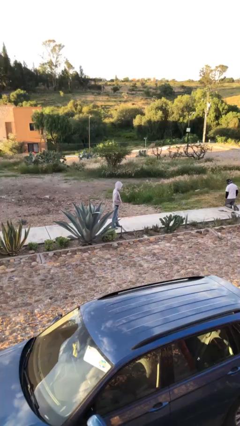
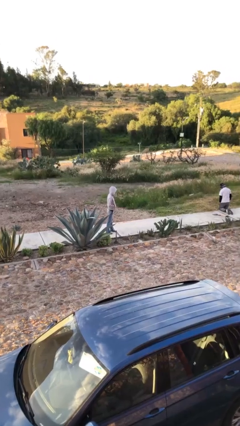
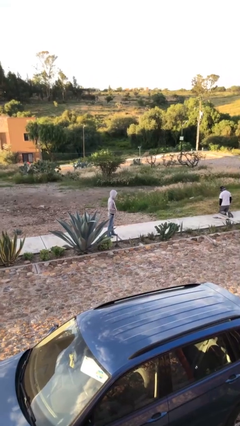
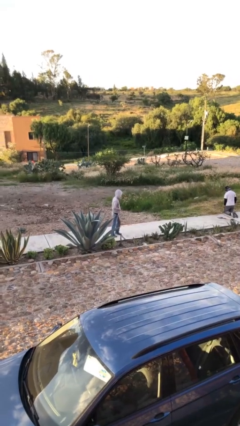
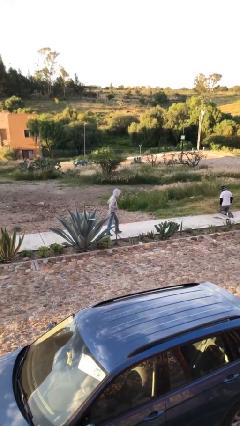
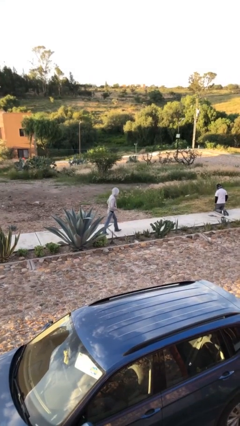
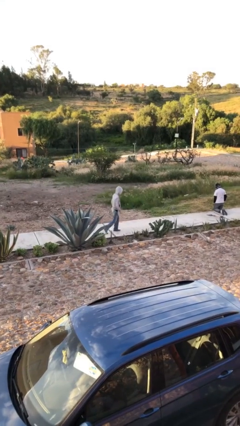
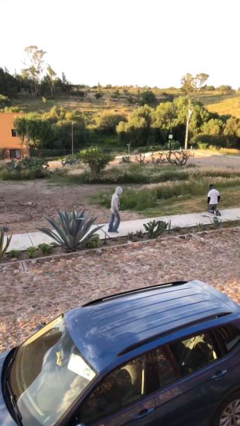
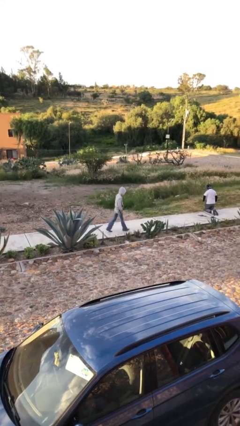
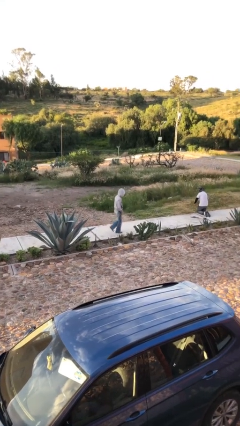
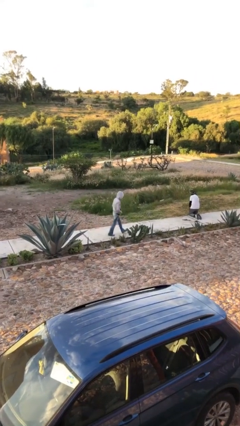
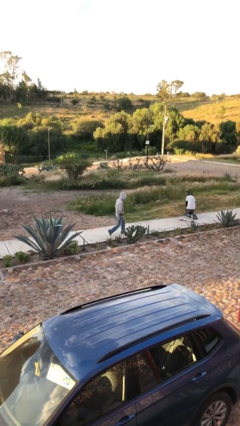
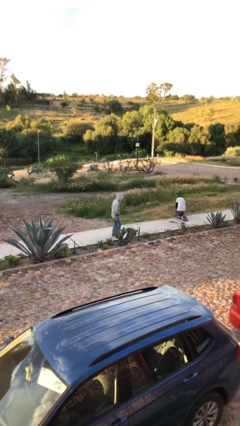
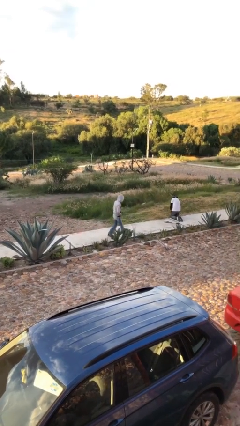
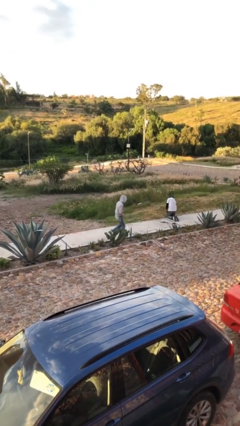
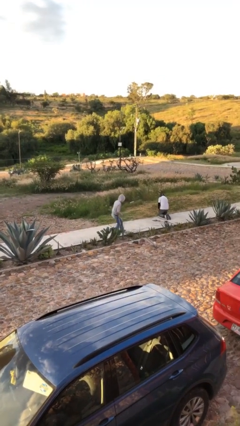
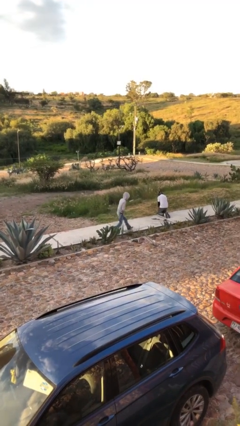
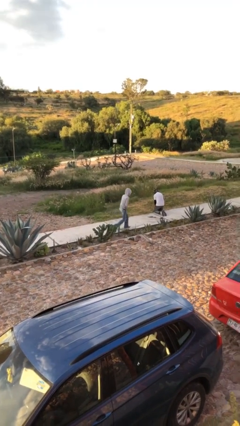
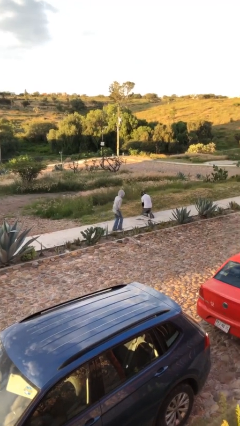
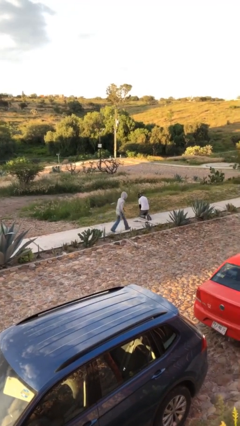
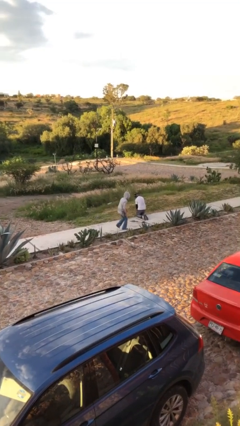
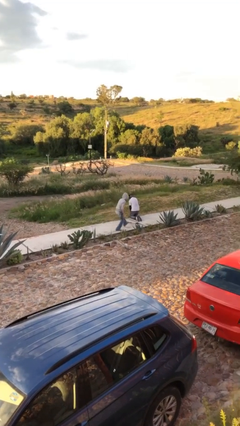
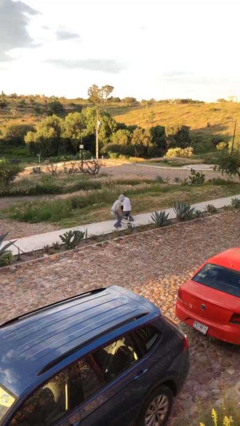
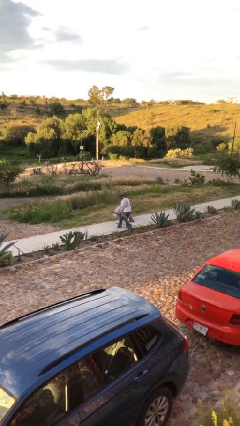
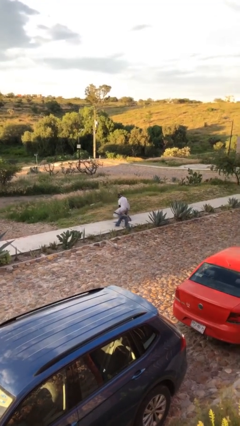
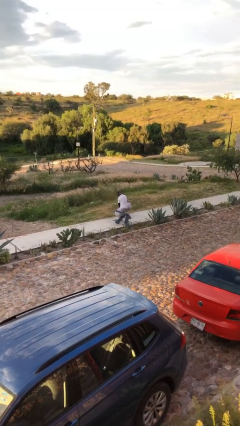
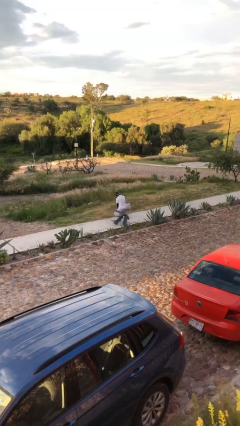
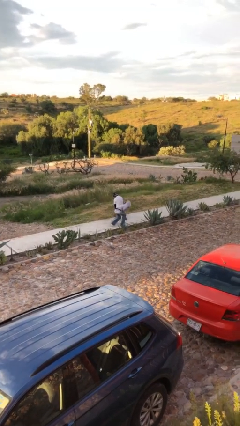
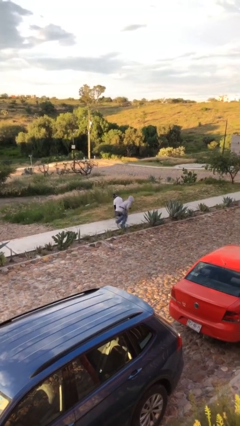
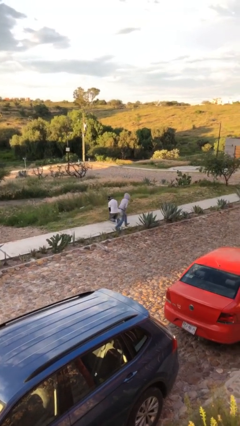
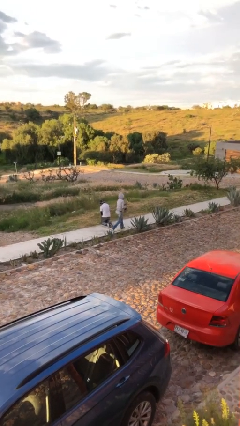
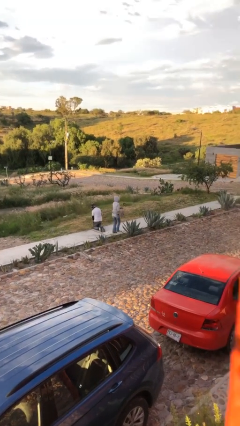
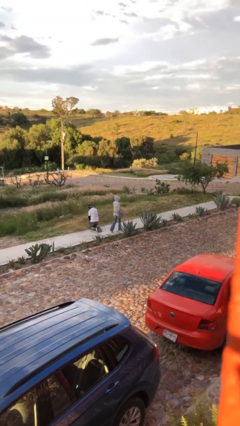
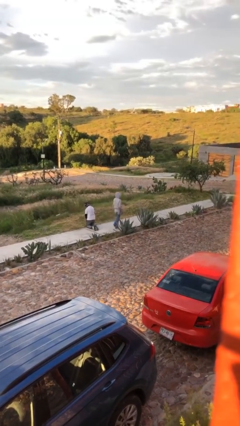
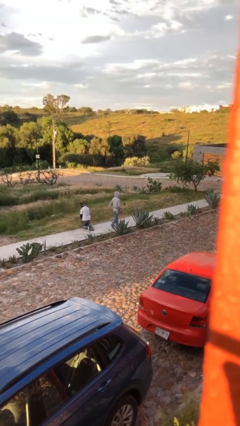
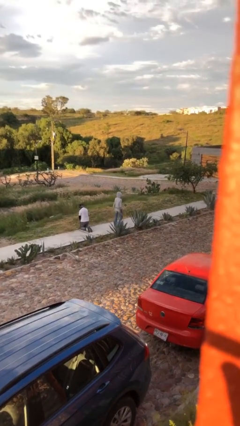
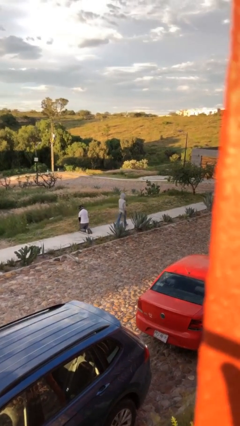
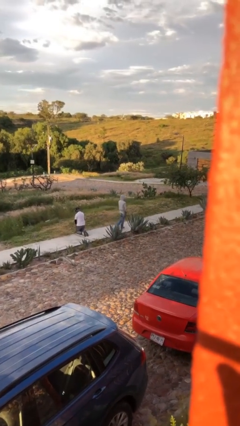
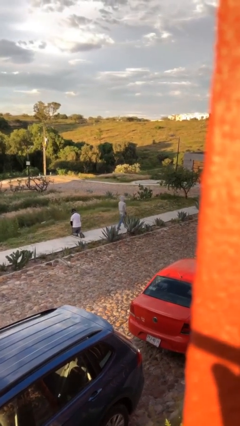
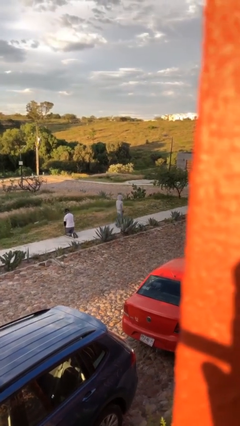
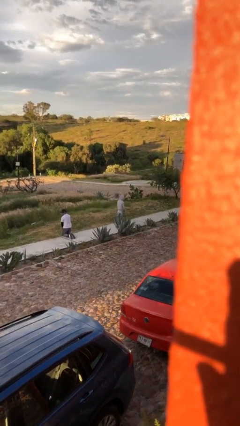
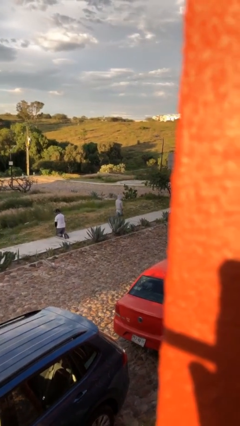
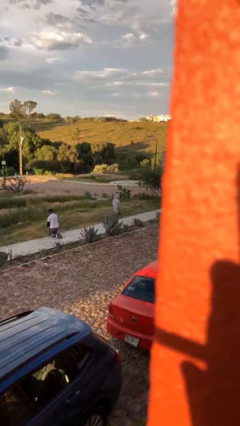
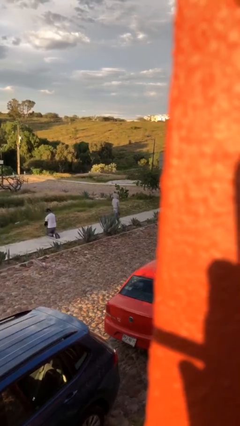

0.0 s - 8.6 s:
person steals object from person

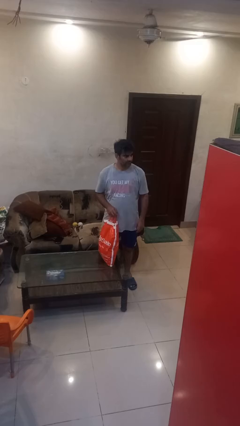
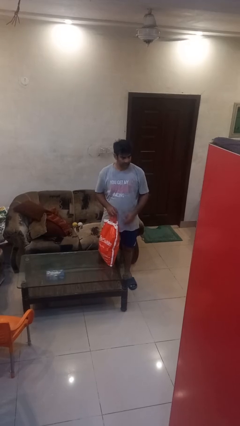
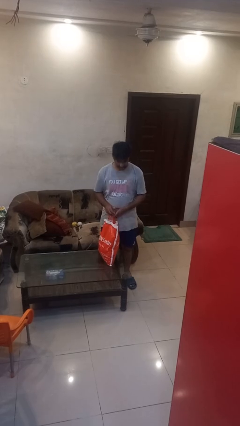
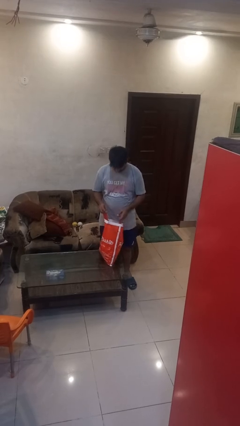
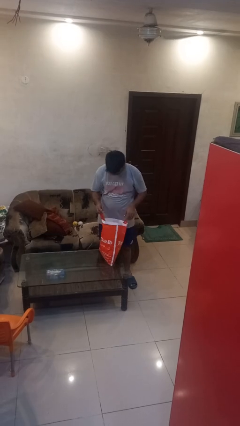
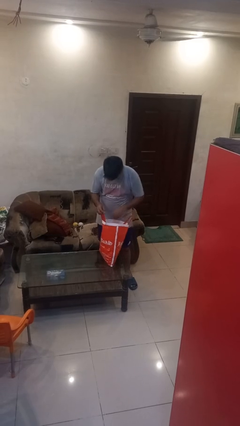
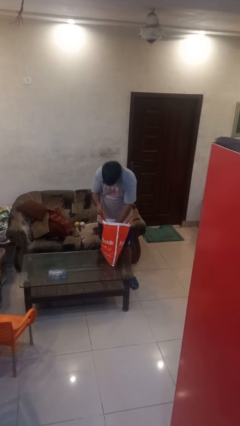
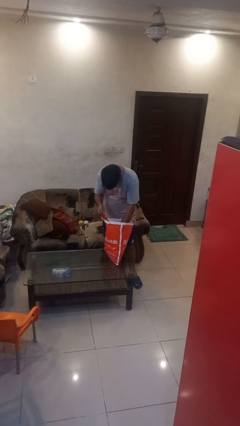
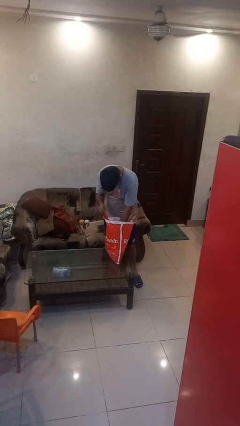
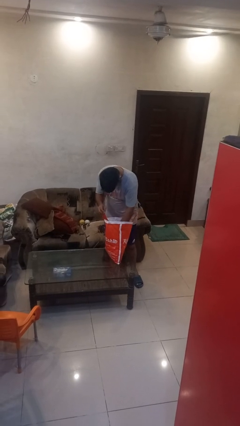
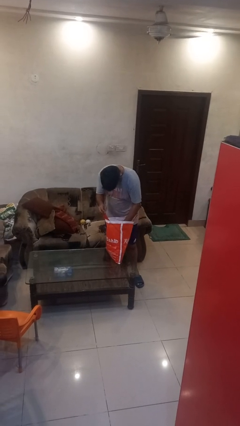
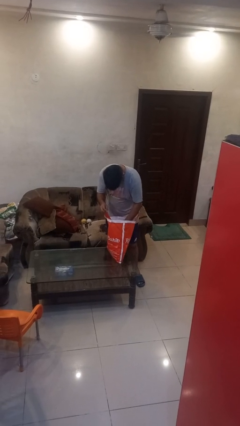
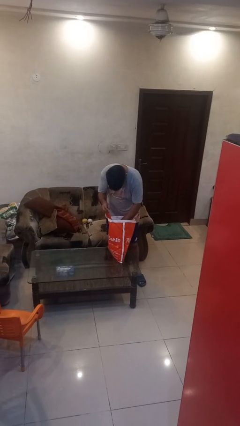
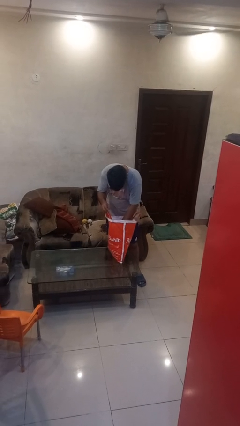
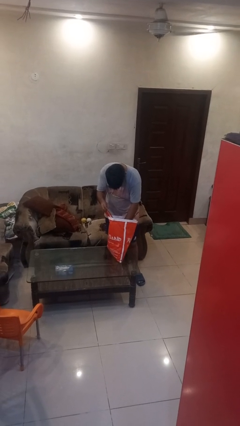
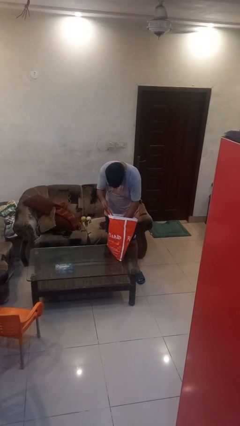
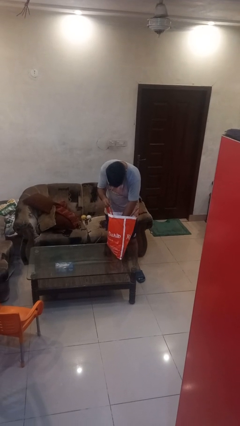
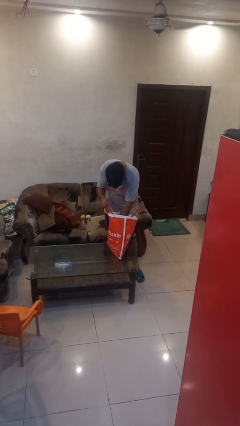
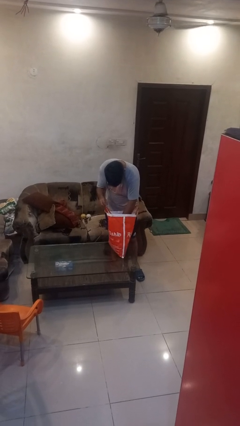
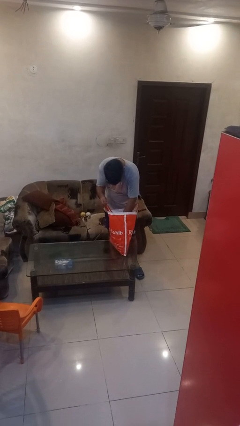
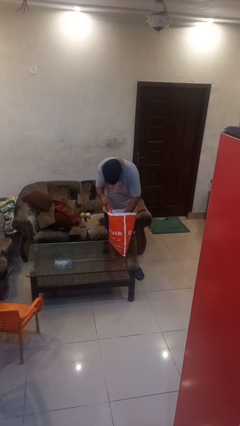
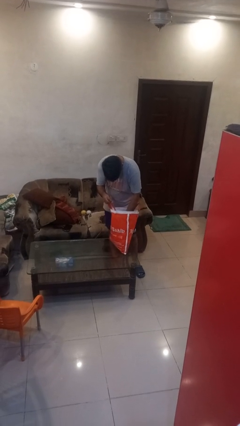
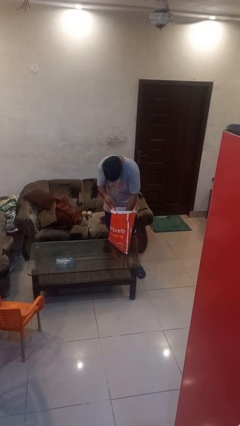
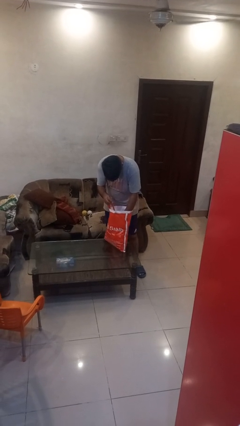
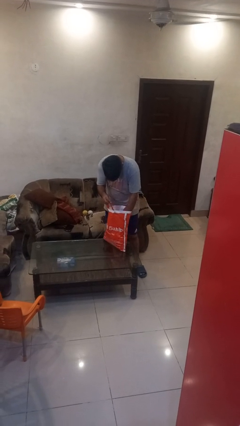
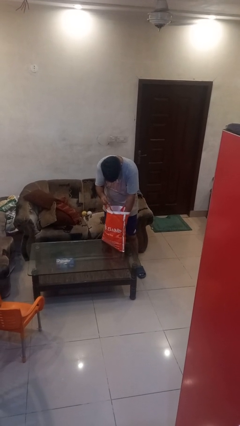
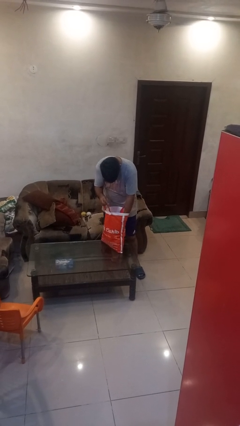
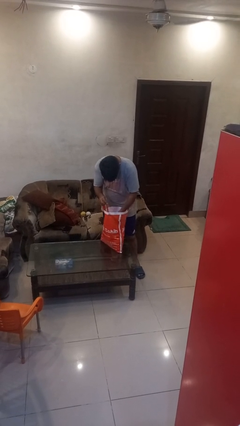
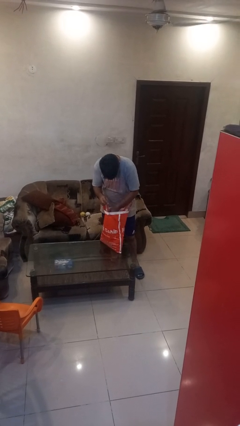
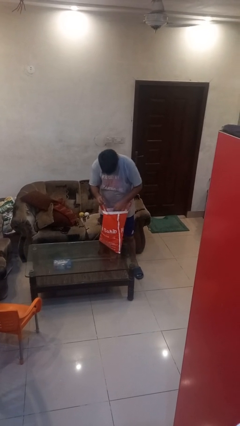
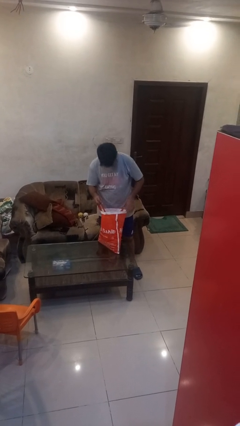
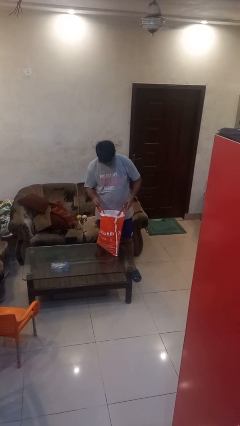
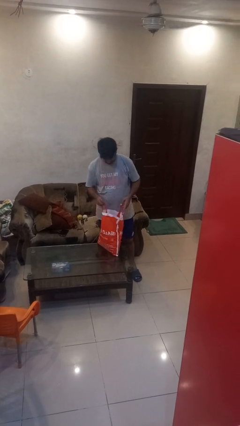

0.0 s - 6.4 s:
person searches in bag

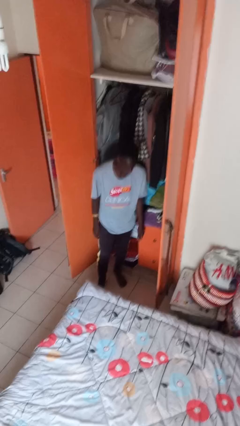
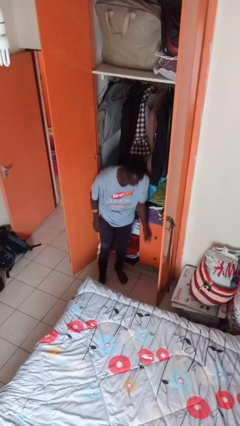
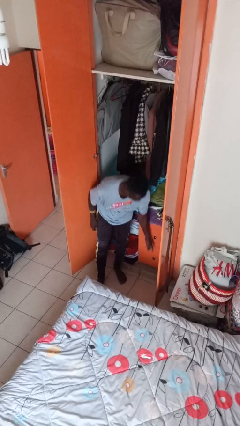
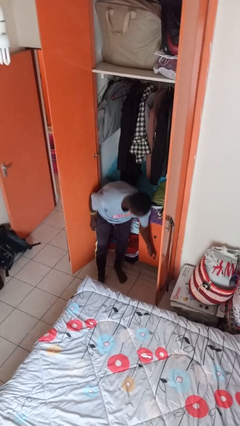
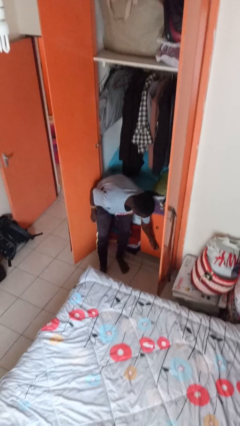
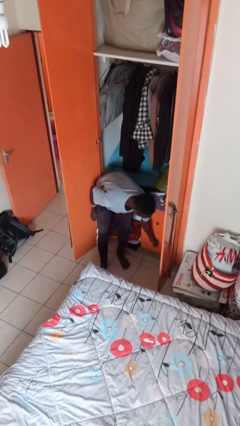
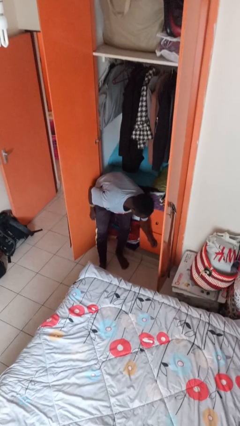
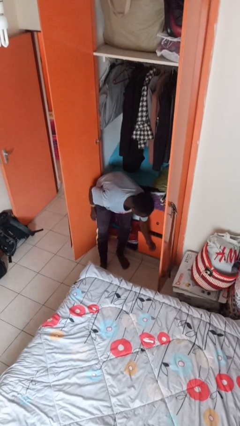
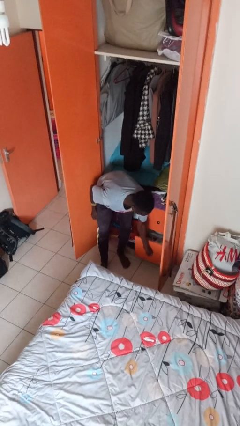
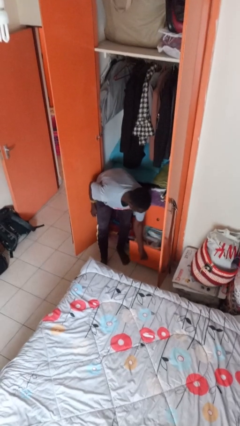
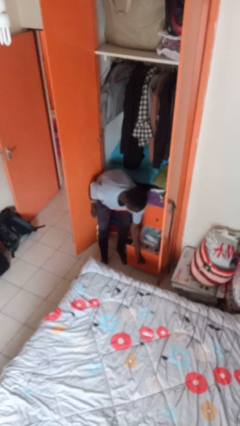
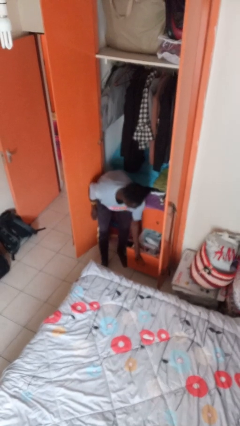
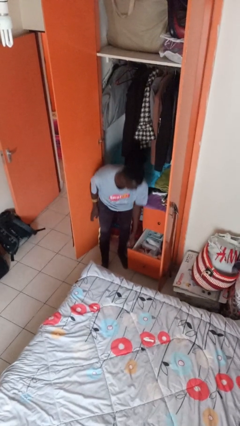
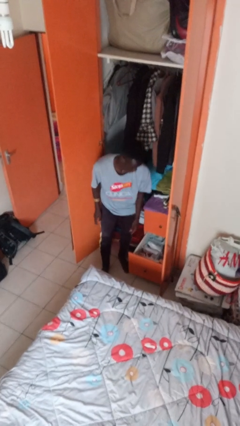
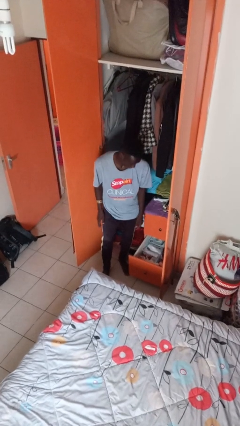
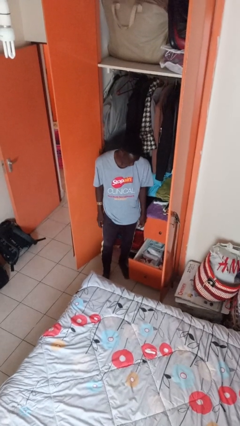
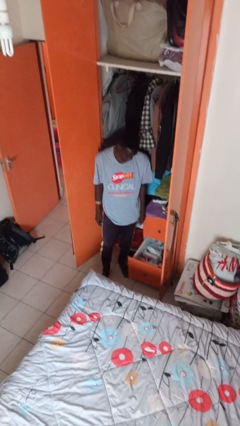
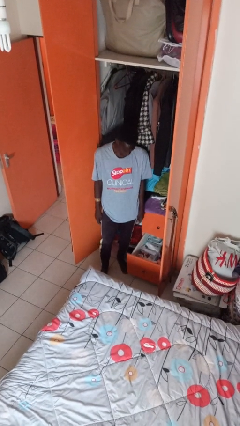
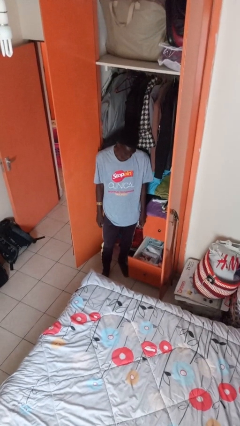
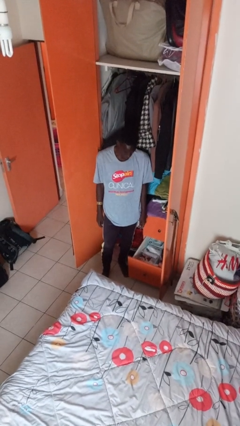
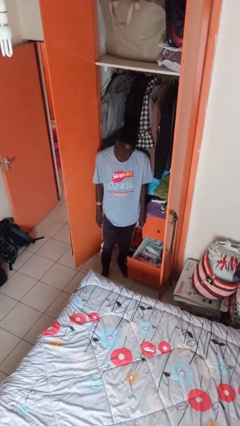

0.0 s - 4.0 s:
person opens dresser drawer
